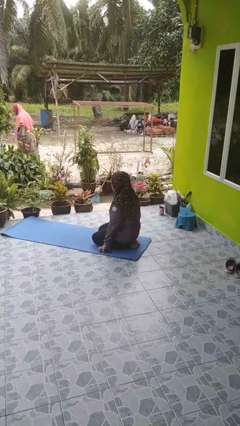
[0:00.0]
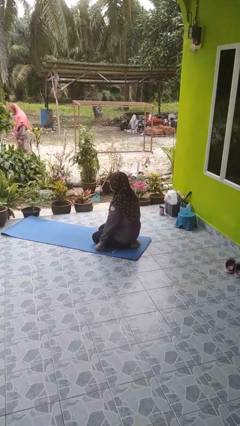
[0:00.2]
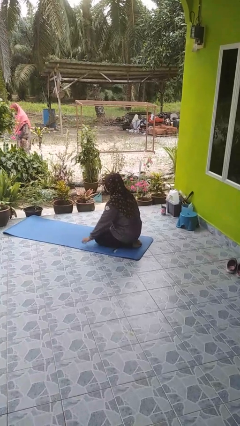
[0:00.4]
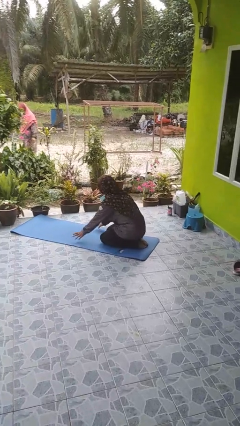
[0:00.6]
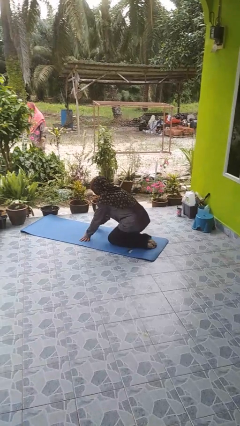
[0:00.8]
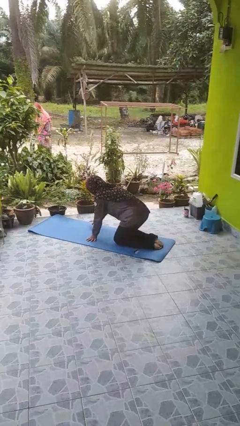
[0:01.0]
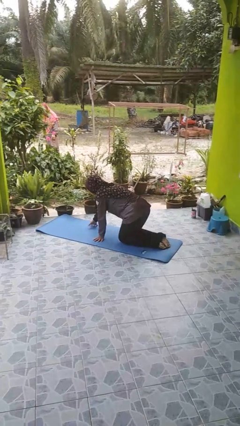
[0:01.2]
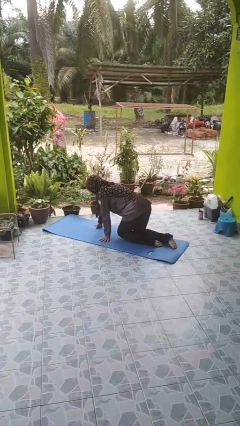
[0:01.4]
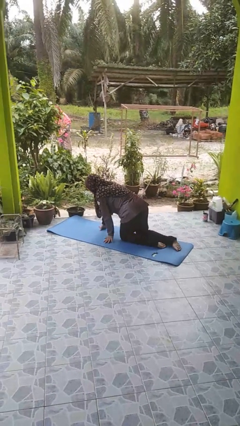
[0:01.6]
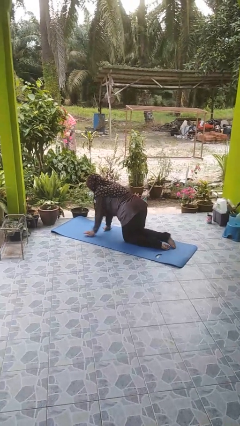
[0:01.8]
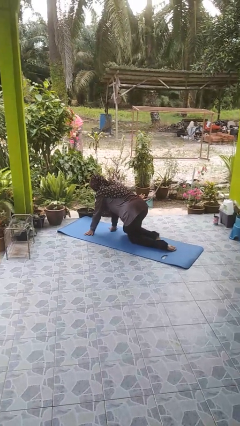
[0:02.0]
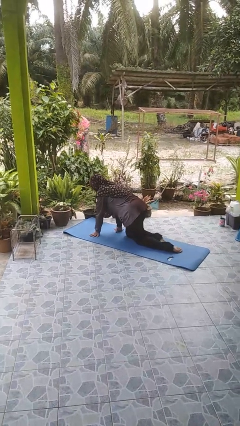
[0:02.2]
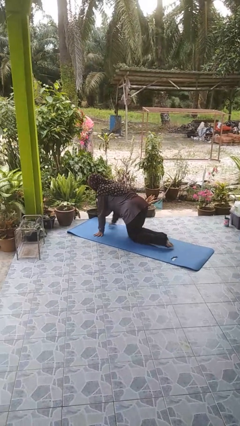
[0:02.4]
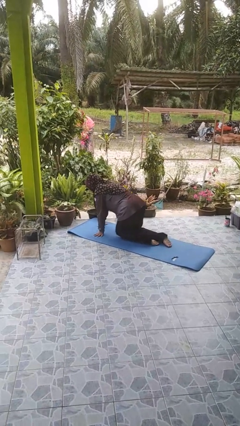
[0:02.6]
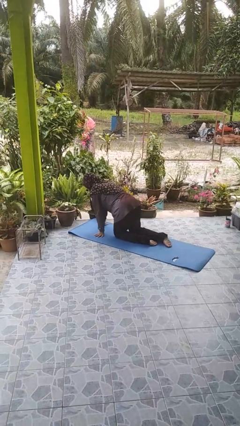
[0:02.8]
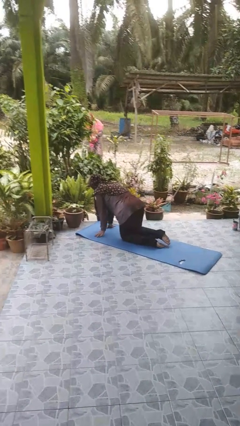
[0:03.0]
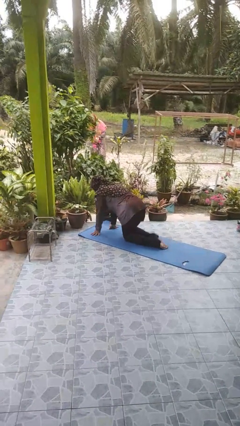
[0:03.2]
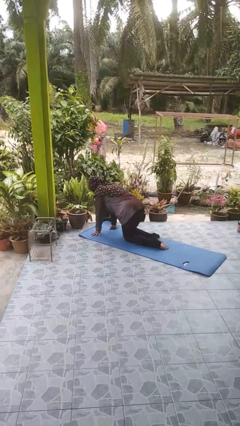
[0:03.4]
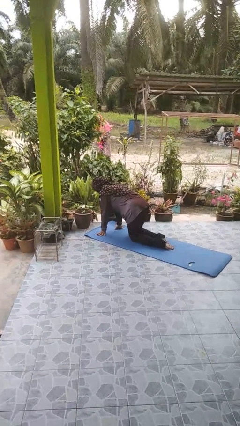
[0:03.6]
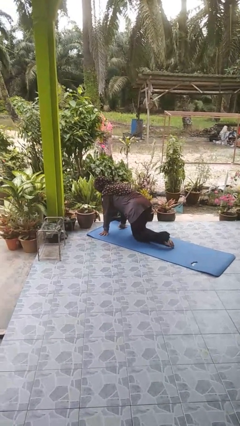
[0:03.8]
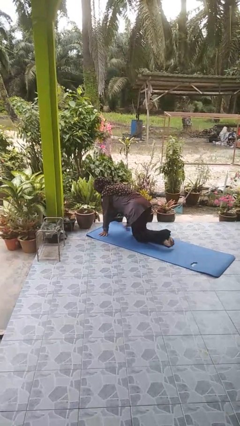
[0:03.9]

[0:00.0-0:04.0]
person crawls

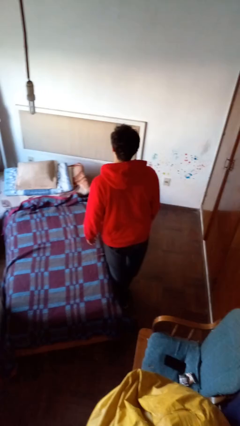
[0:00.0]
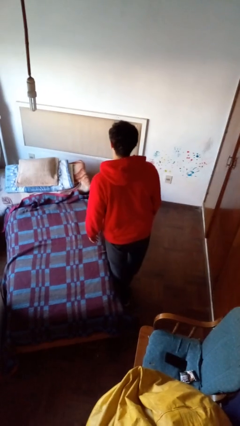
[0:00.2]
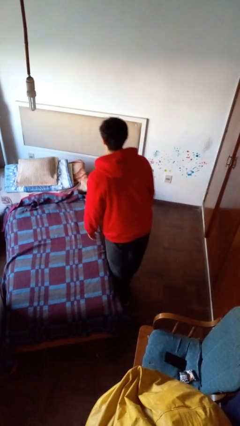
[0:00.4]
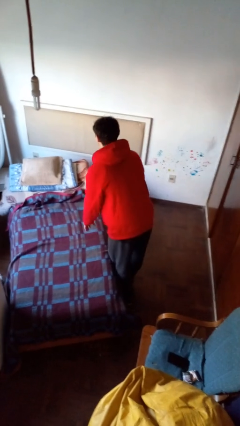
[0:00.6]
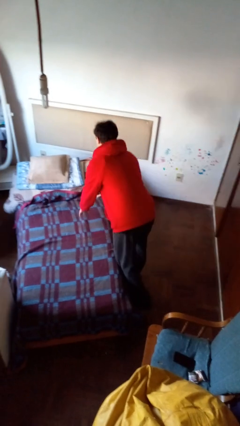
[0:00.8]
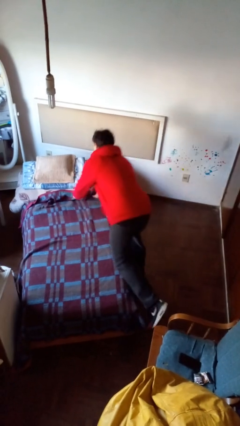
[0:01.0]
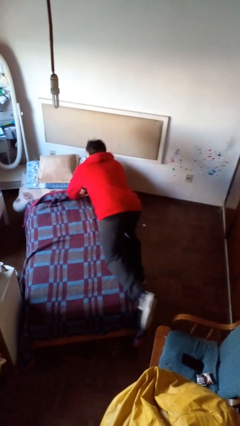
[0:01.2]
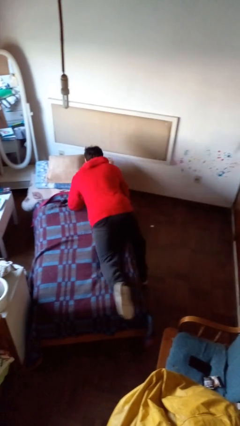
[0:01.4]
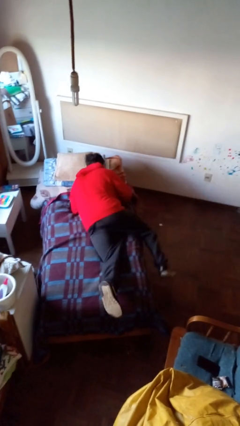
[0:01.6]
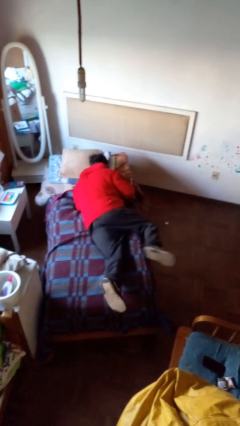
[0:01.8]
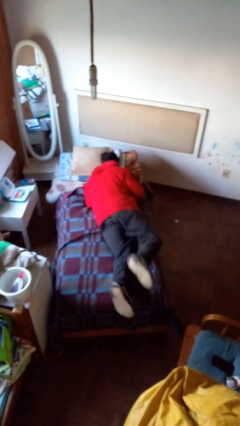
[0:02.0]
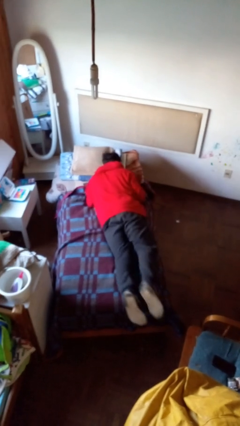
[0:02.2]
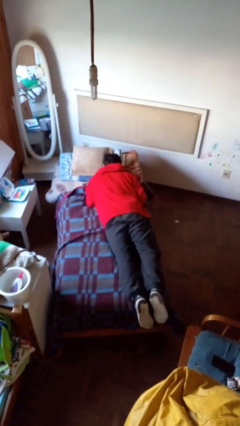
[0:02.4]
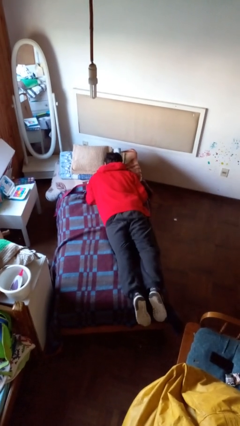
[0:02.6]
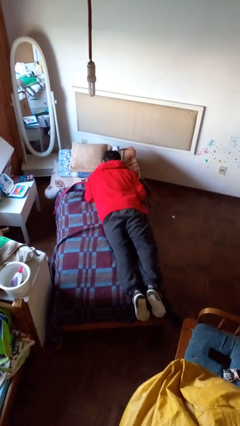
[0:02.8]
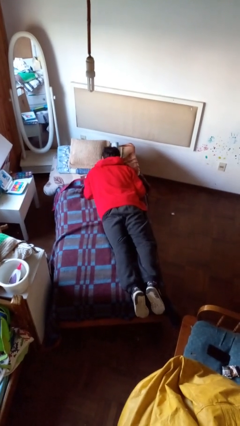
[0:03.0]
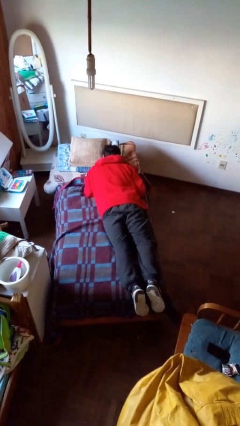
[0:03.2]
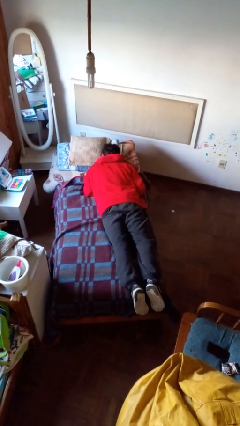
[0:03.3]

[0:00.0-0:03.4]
person lies down on bed

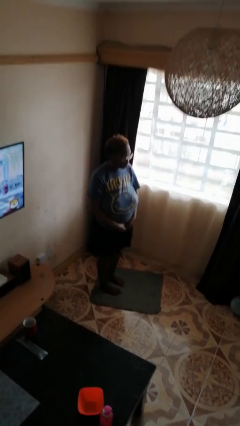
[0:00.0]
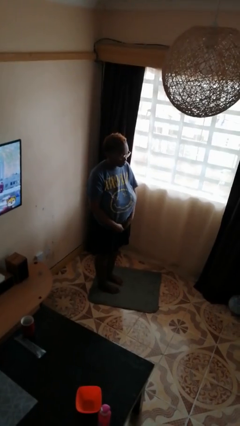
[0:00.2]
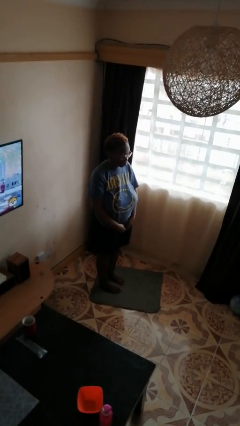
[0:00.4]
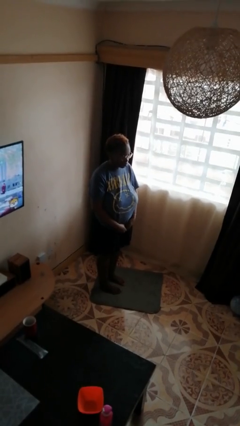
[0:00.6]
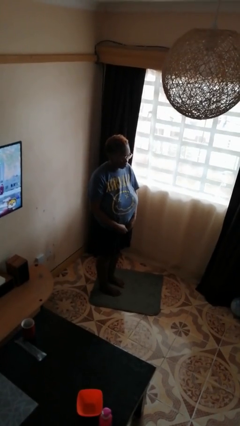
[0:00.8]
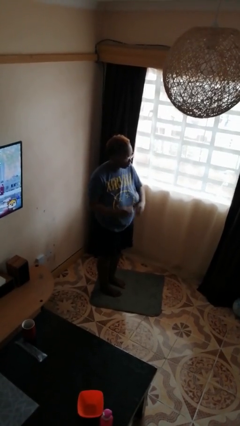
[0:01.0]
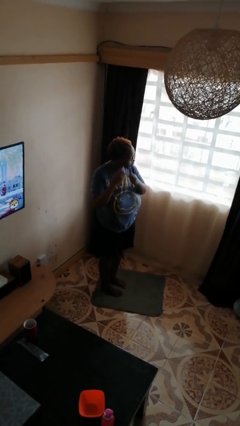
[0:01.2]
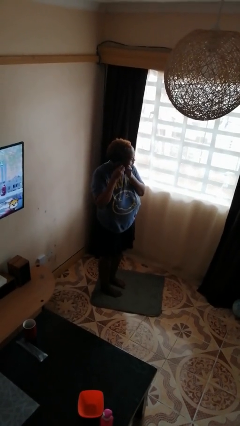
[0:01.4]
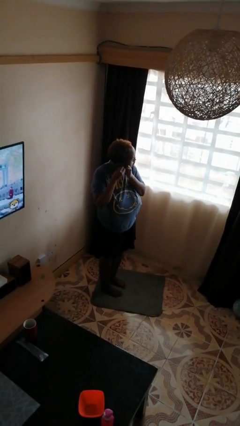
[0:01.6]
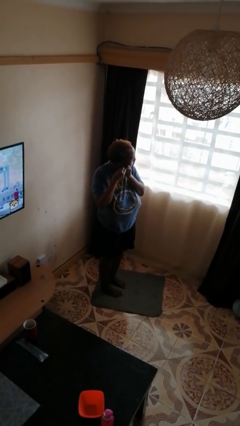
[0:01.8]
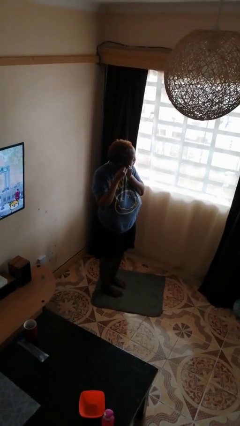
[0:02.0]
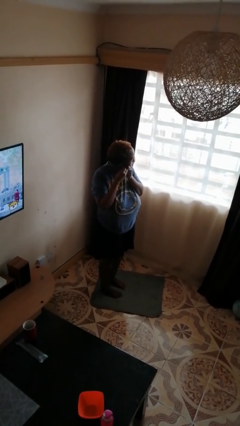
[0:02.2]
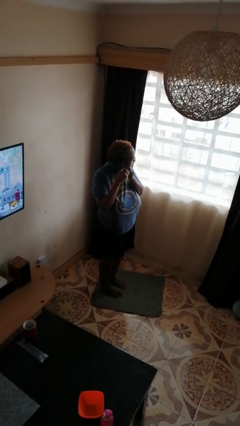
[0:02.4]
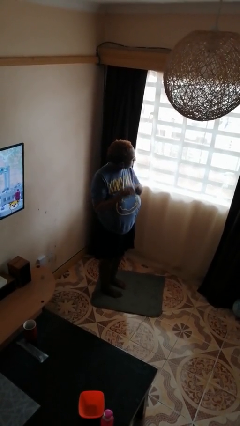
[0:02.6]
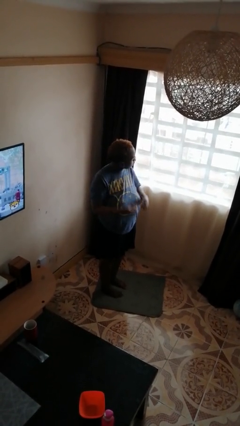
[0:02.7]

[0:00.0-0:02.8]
person takes off earrings

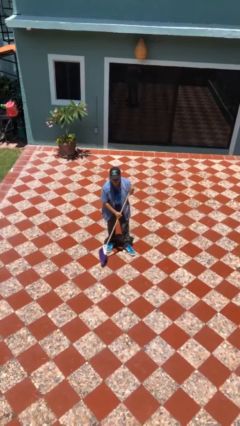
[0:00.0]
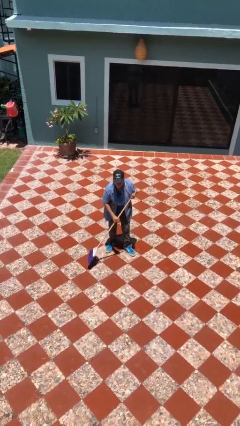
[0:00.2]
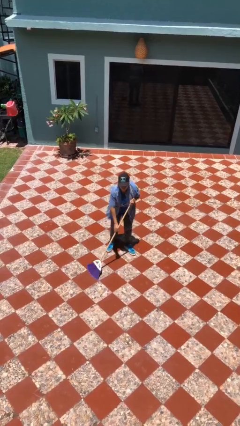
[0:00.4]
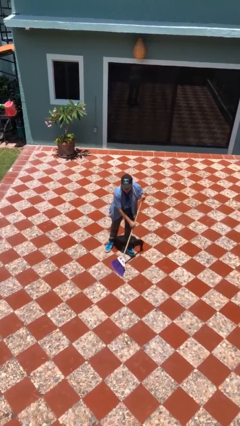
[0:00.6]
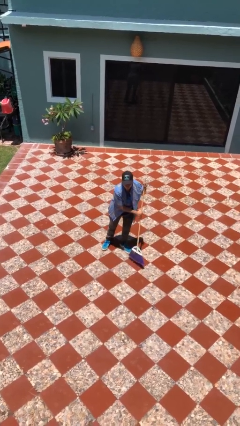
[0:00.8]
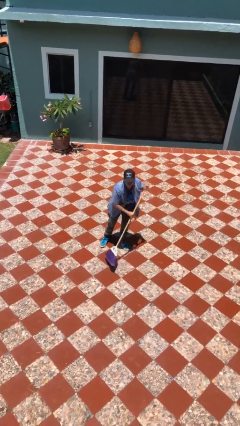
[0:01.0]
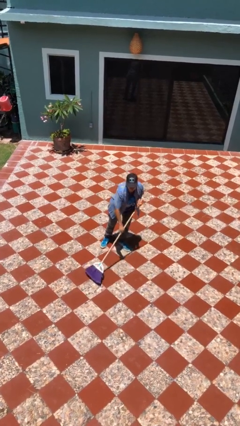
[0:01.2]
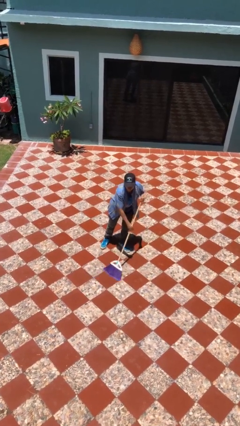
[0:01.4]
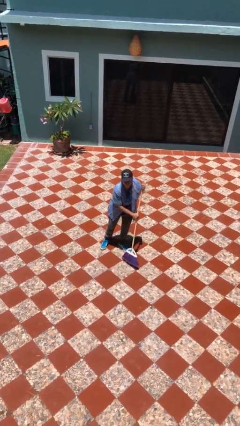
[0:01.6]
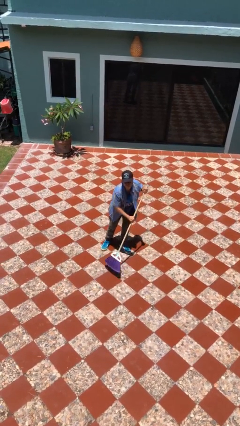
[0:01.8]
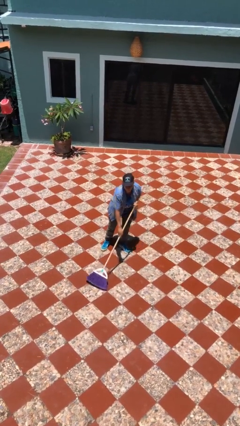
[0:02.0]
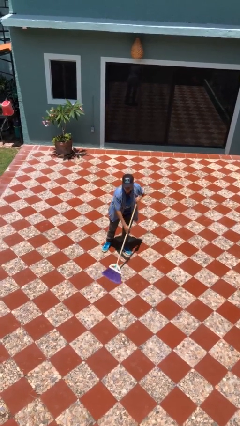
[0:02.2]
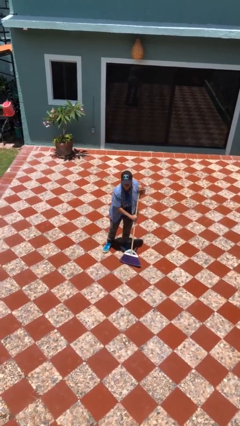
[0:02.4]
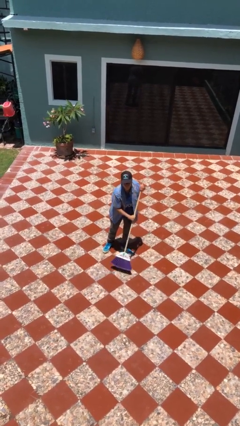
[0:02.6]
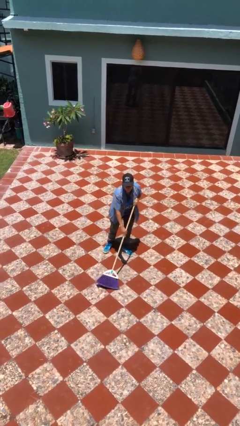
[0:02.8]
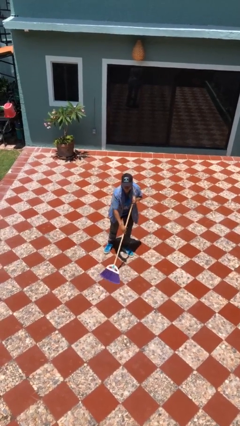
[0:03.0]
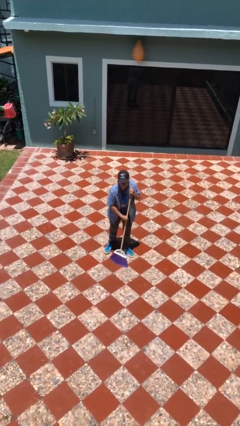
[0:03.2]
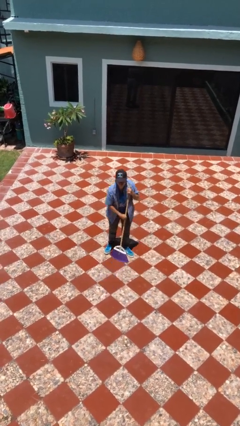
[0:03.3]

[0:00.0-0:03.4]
person sweeps floor

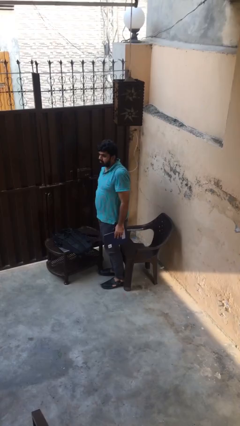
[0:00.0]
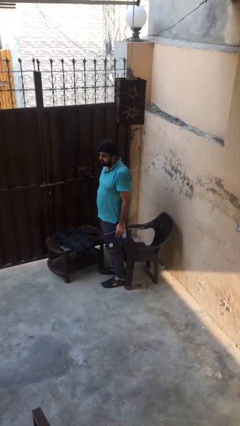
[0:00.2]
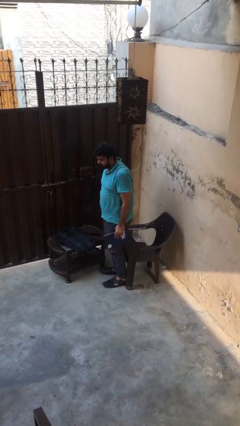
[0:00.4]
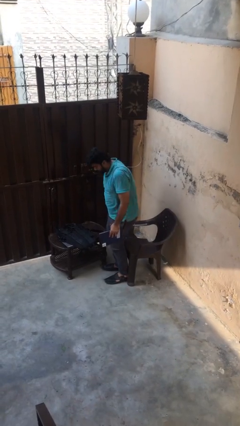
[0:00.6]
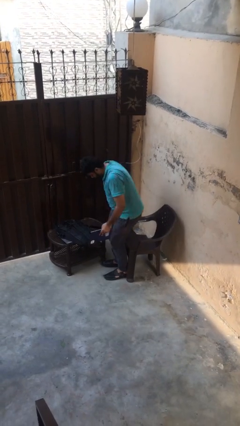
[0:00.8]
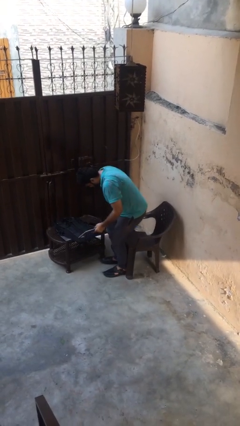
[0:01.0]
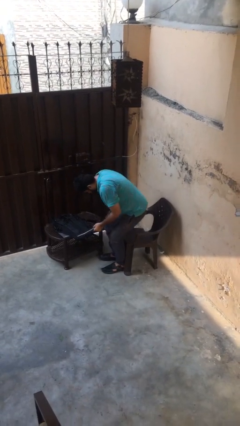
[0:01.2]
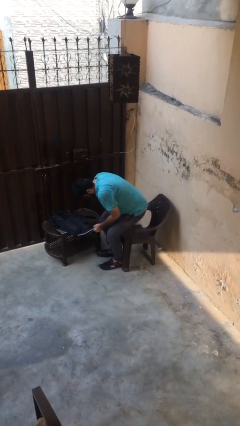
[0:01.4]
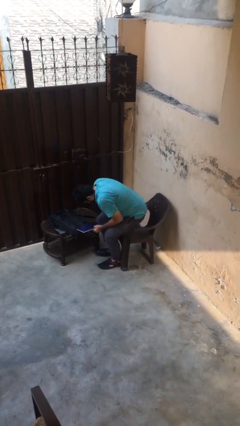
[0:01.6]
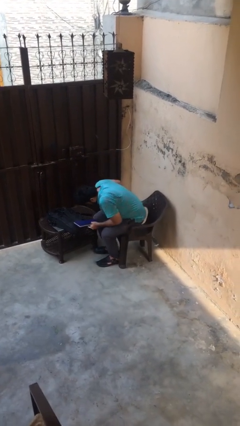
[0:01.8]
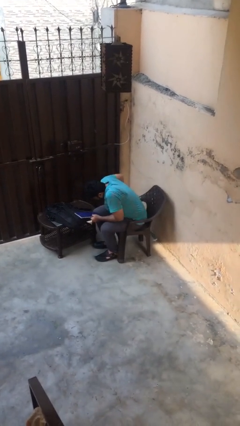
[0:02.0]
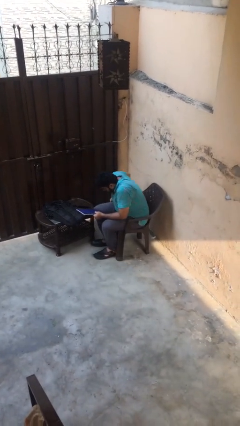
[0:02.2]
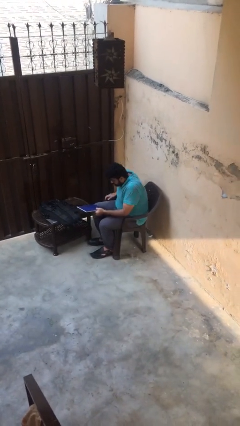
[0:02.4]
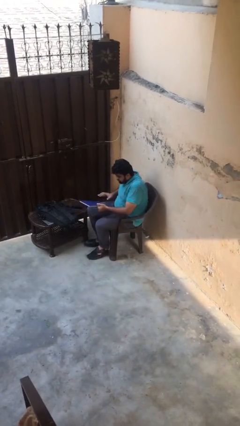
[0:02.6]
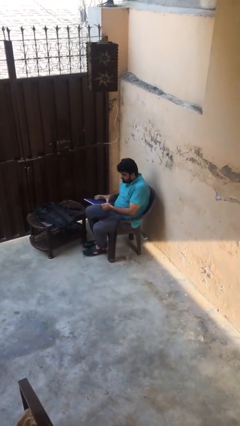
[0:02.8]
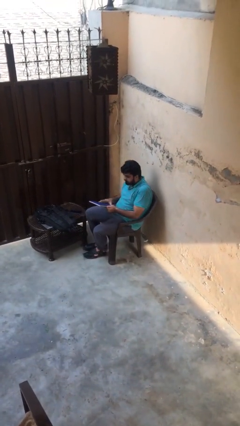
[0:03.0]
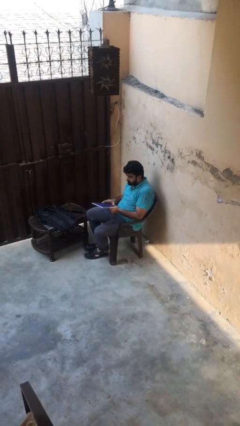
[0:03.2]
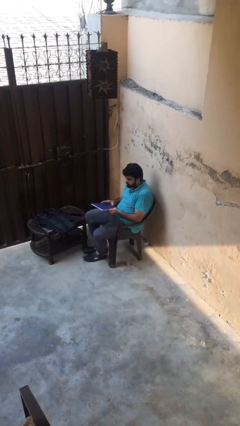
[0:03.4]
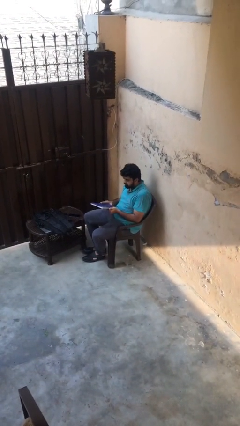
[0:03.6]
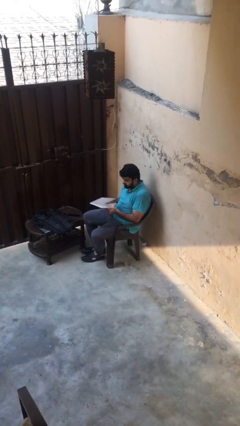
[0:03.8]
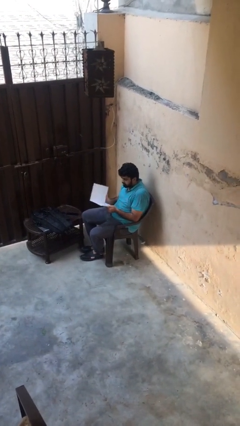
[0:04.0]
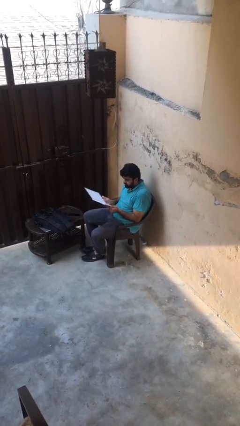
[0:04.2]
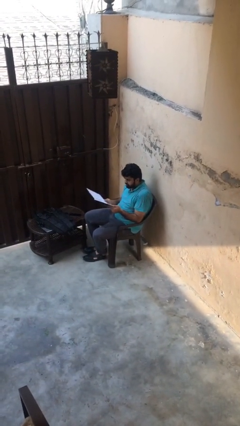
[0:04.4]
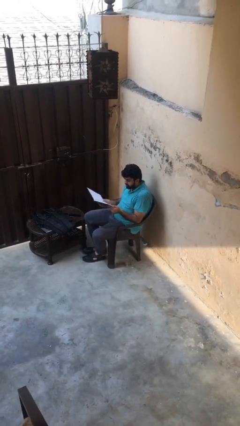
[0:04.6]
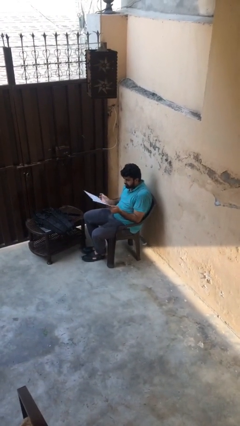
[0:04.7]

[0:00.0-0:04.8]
person sits down
